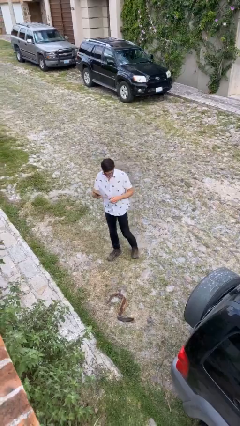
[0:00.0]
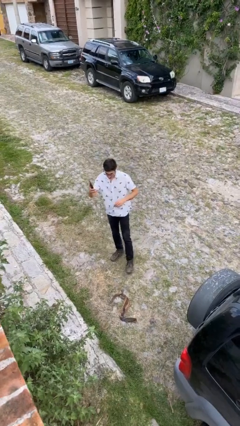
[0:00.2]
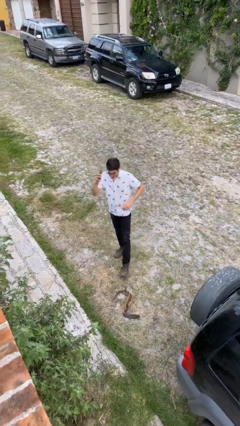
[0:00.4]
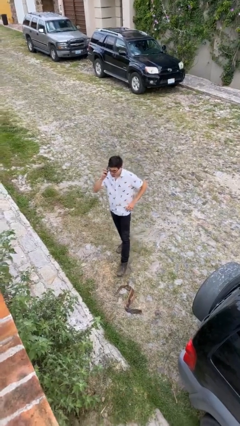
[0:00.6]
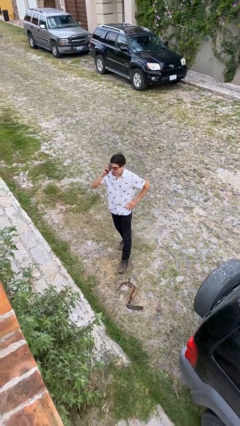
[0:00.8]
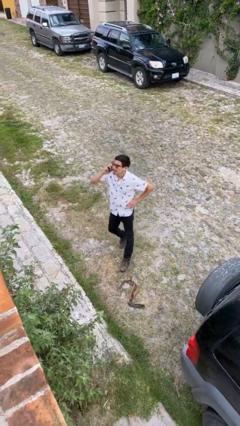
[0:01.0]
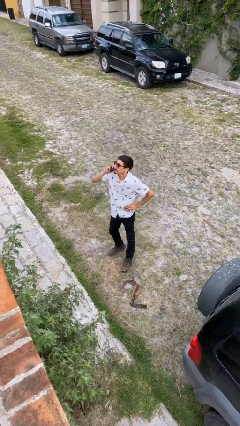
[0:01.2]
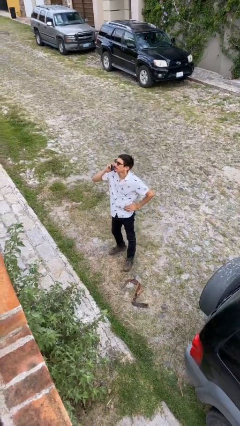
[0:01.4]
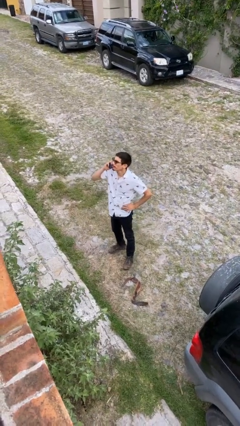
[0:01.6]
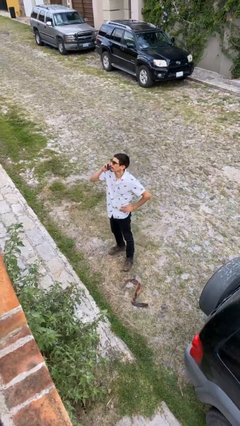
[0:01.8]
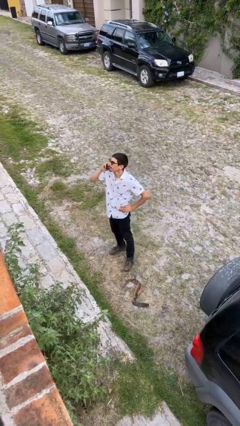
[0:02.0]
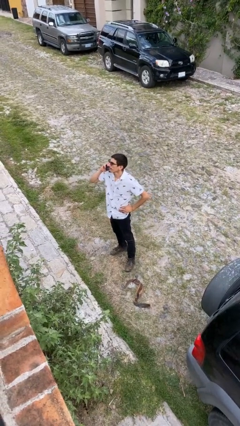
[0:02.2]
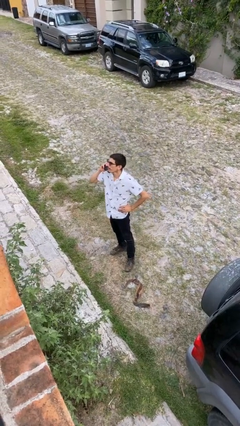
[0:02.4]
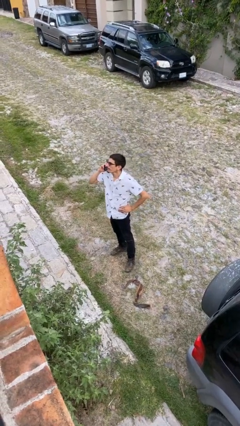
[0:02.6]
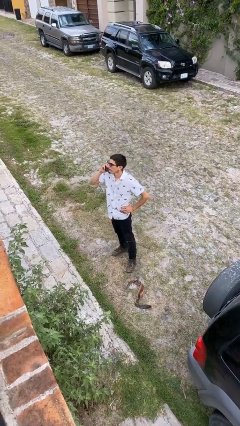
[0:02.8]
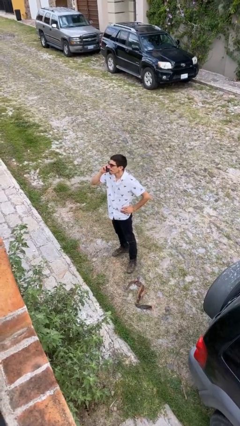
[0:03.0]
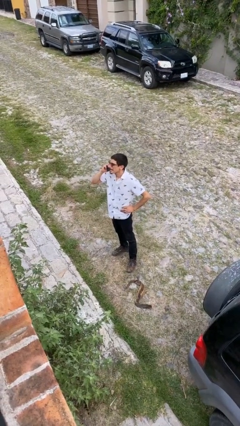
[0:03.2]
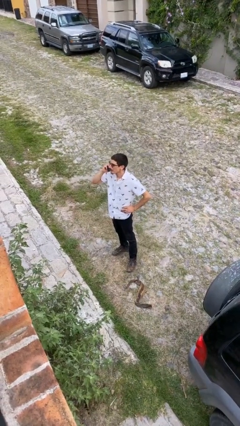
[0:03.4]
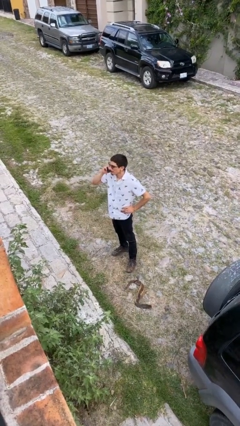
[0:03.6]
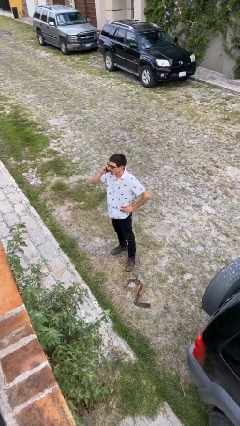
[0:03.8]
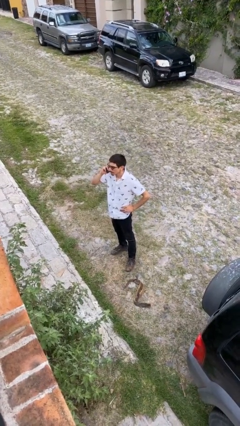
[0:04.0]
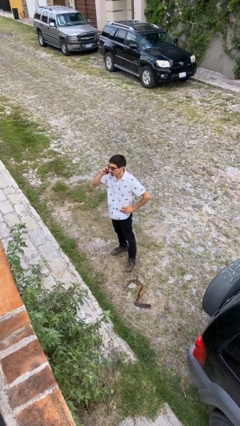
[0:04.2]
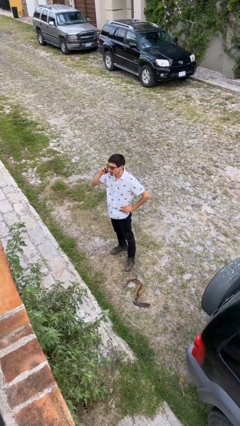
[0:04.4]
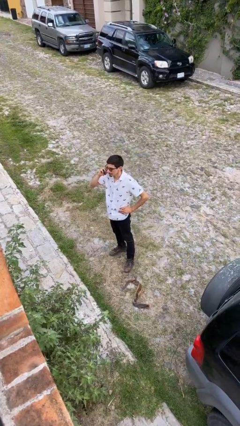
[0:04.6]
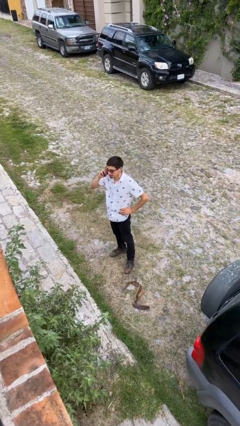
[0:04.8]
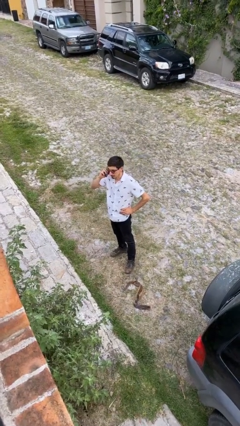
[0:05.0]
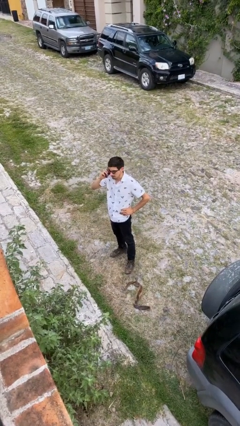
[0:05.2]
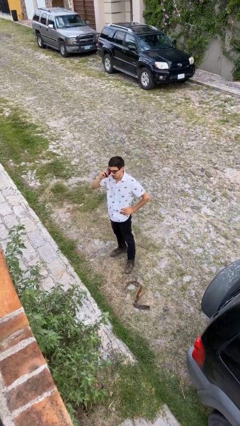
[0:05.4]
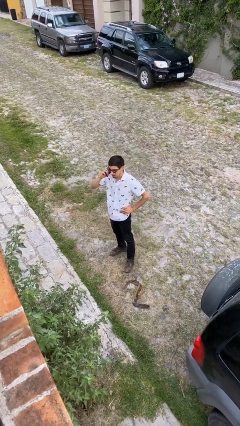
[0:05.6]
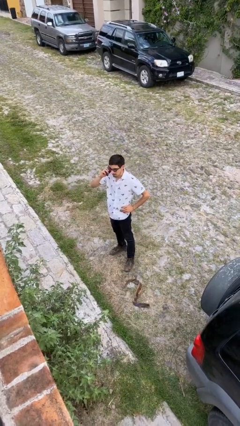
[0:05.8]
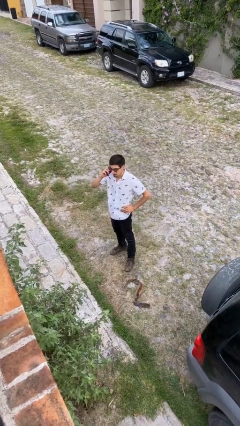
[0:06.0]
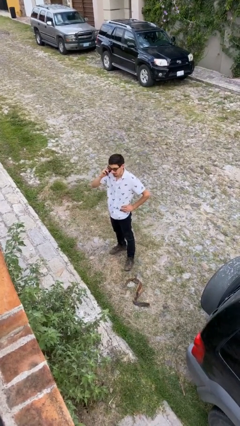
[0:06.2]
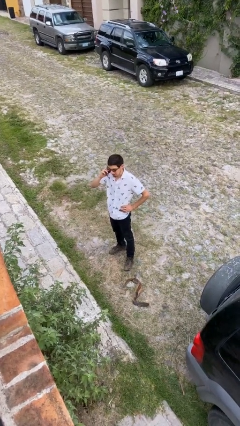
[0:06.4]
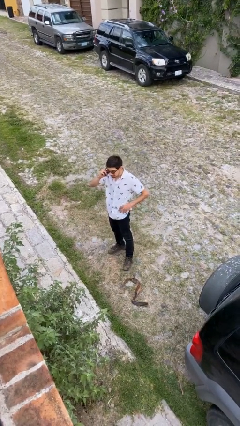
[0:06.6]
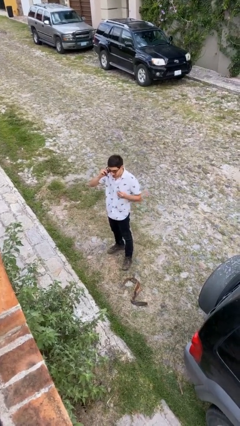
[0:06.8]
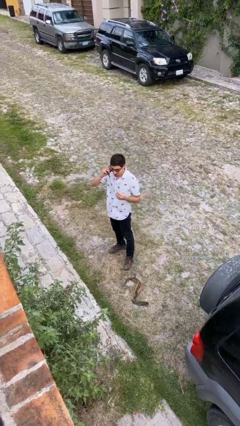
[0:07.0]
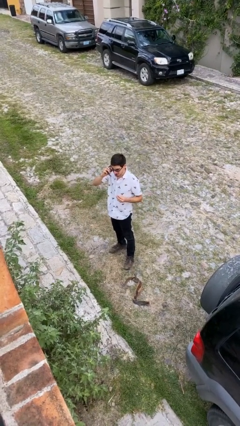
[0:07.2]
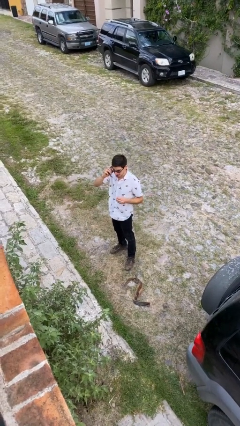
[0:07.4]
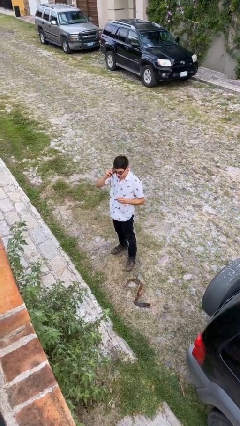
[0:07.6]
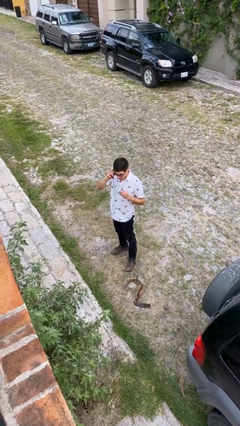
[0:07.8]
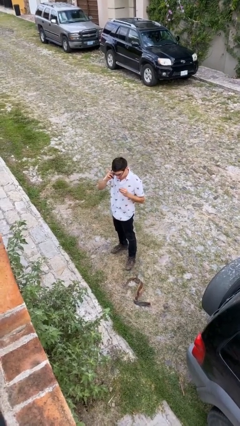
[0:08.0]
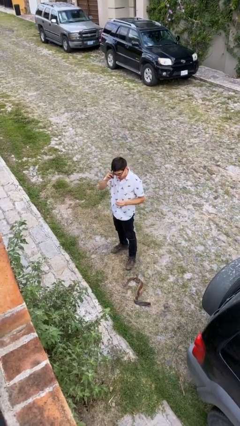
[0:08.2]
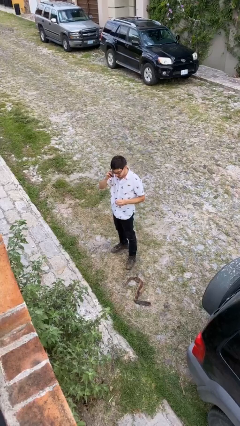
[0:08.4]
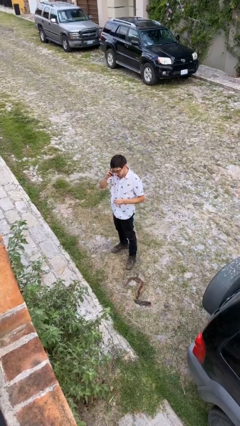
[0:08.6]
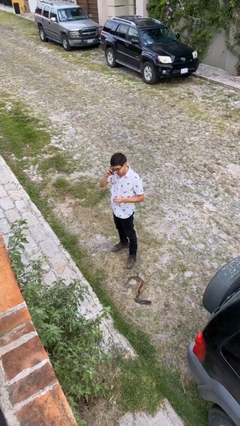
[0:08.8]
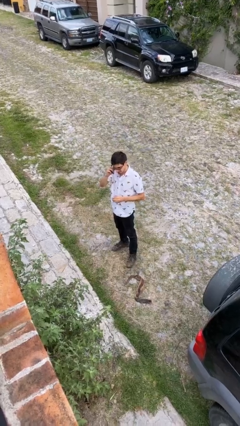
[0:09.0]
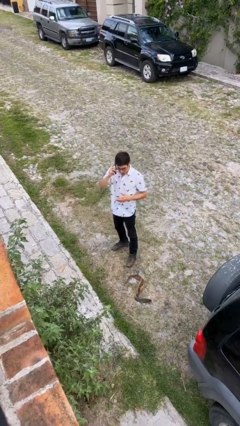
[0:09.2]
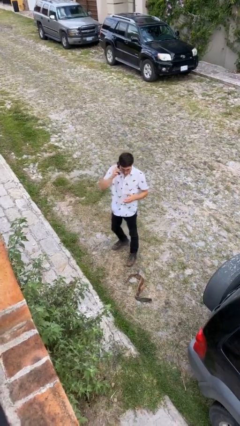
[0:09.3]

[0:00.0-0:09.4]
person talks on phone

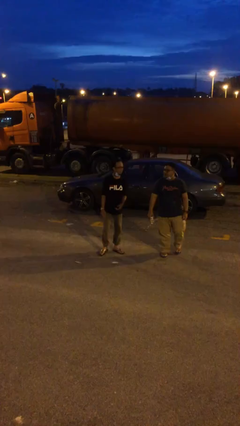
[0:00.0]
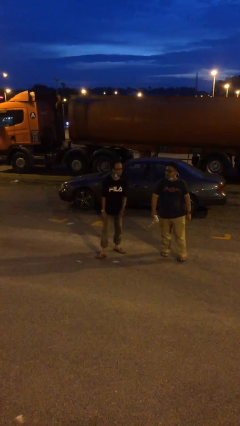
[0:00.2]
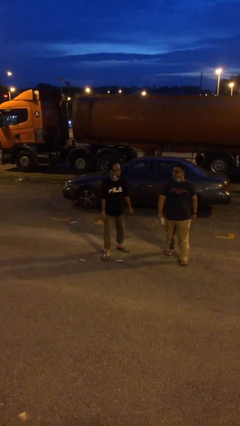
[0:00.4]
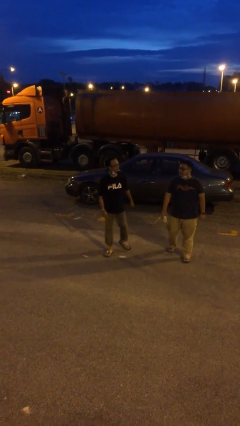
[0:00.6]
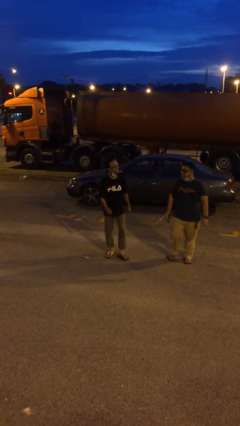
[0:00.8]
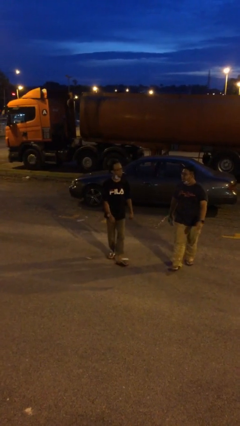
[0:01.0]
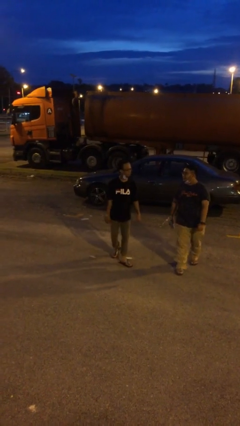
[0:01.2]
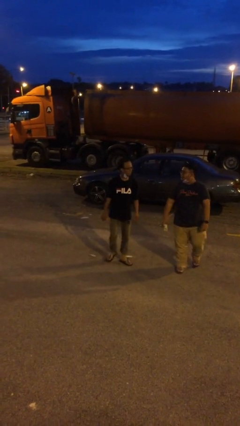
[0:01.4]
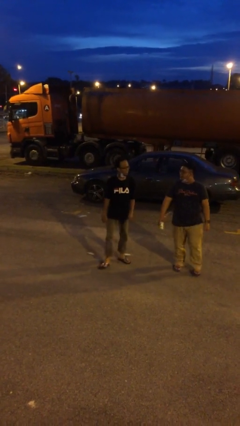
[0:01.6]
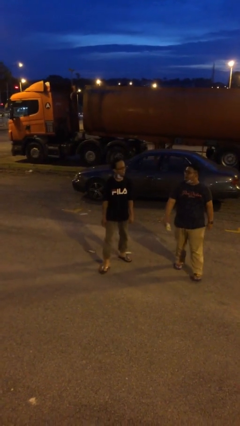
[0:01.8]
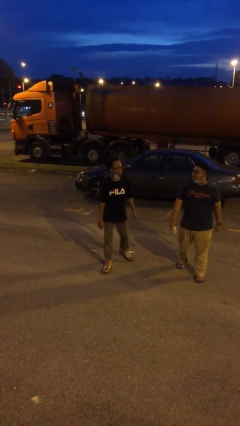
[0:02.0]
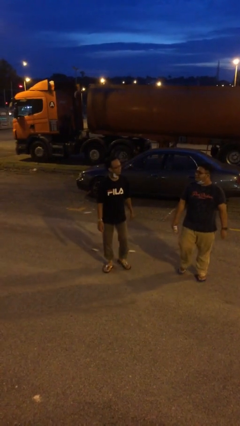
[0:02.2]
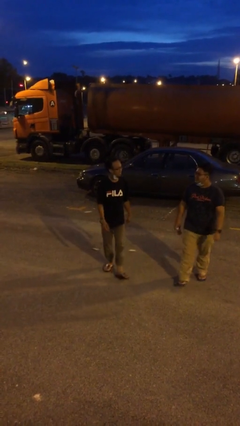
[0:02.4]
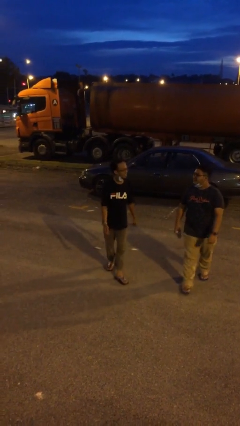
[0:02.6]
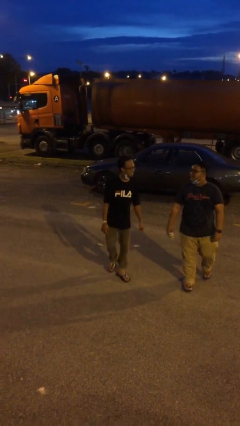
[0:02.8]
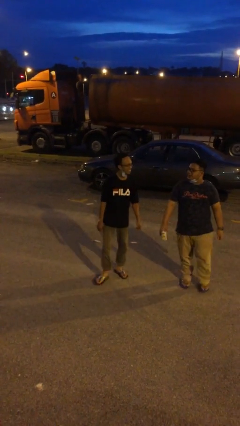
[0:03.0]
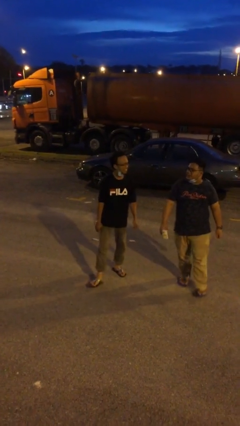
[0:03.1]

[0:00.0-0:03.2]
person talks to person

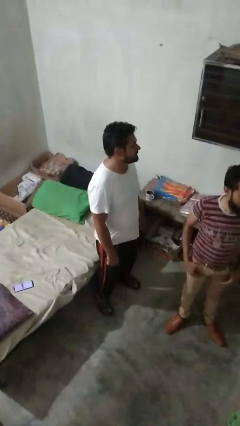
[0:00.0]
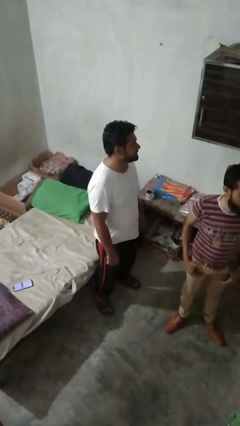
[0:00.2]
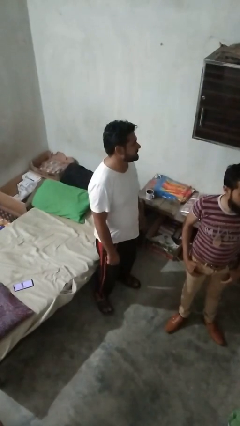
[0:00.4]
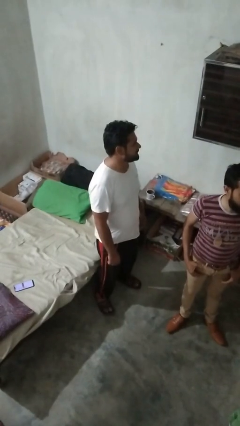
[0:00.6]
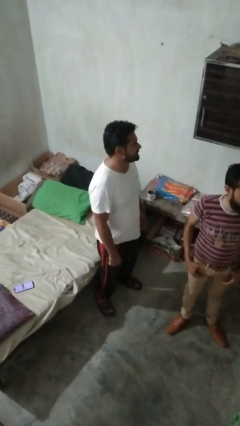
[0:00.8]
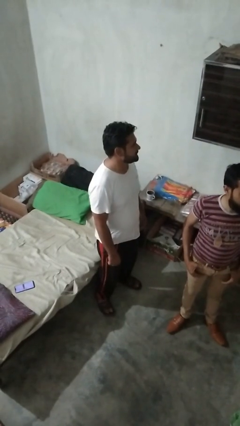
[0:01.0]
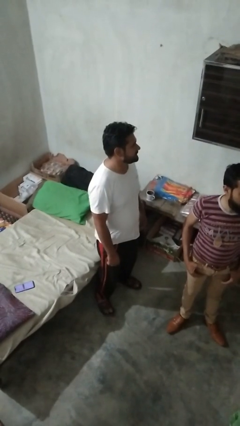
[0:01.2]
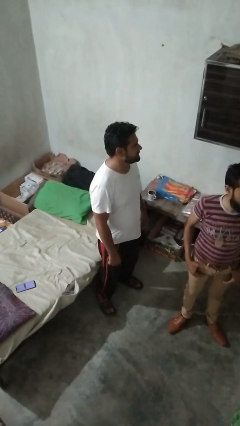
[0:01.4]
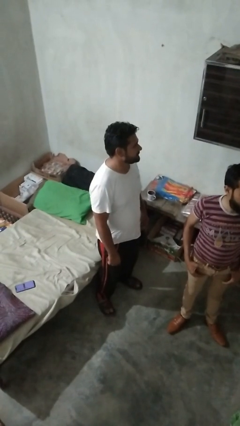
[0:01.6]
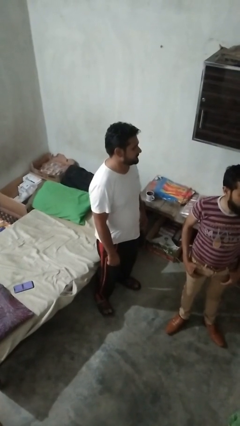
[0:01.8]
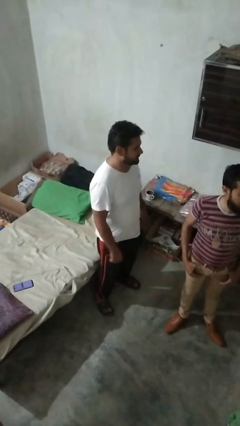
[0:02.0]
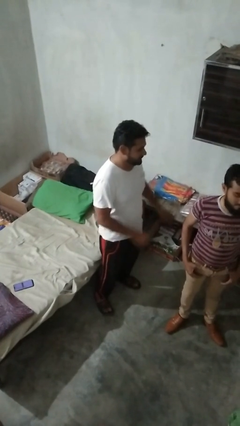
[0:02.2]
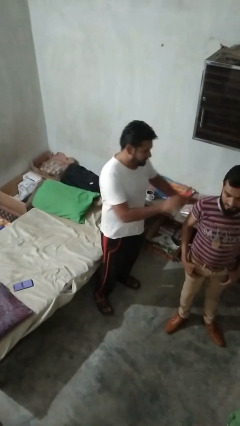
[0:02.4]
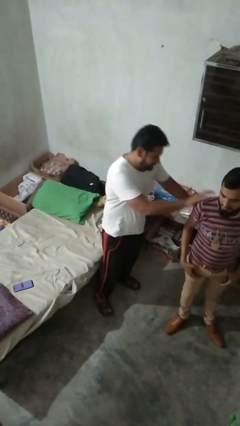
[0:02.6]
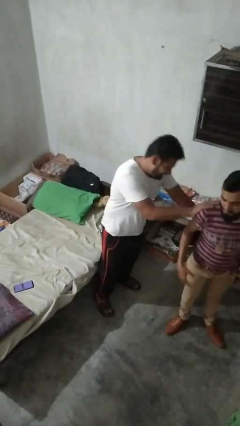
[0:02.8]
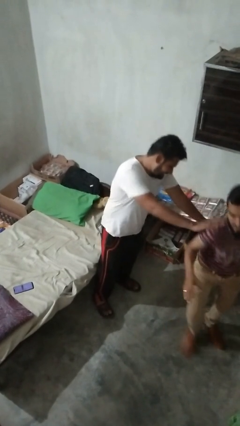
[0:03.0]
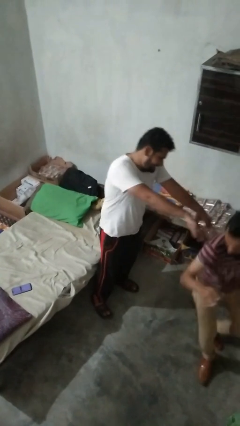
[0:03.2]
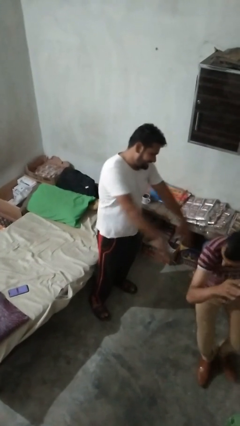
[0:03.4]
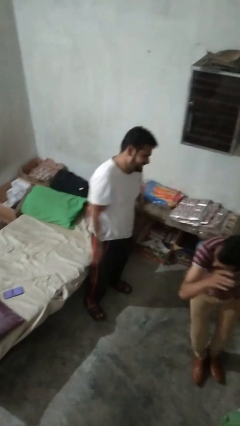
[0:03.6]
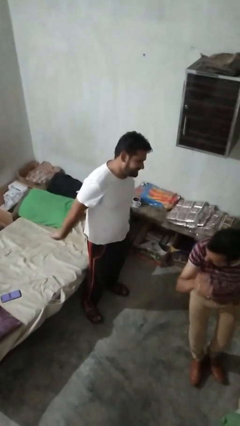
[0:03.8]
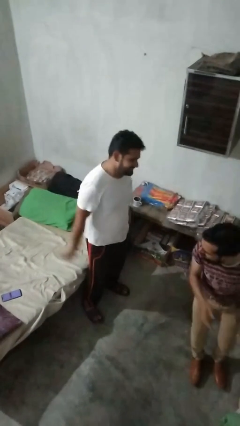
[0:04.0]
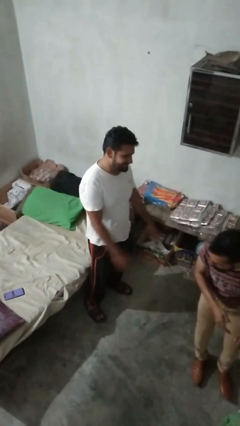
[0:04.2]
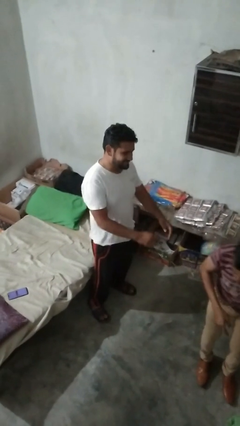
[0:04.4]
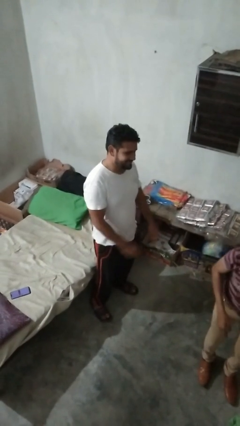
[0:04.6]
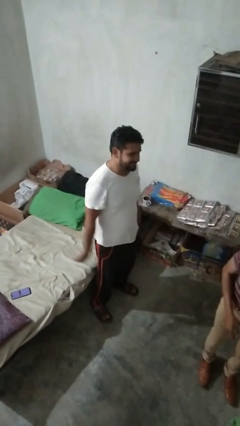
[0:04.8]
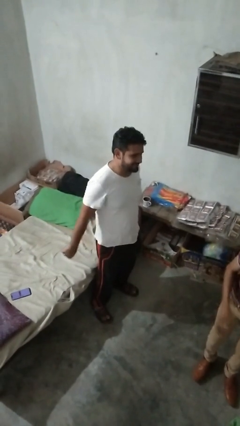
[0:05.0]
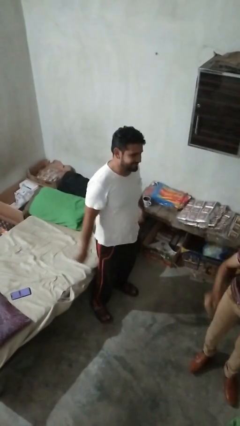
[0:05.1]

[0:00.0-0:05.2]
person shoves person

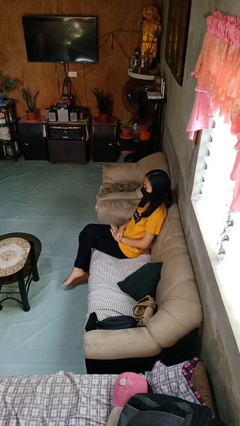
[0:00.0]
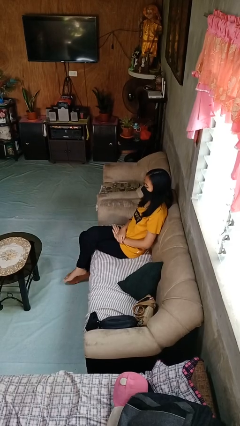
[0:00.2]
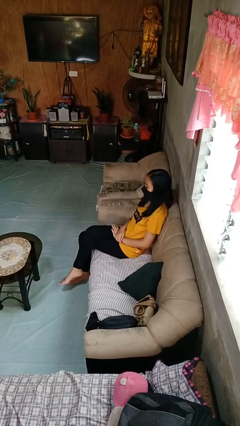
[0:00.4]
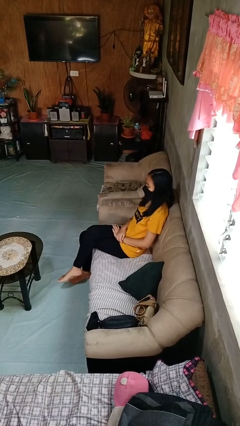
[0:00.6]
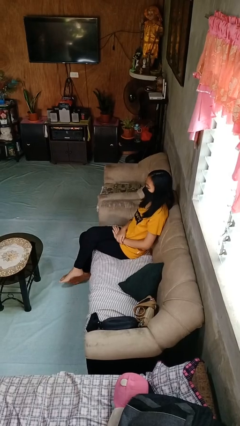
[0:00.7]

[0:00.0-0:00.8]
person crosses legs
